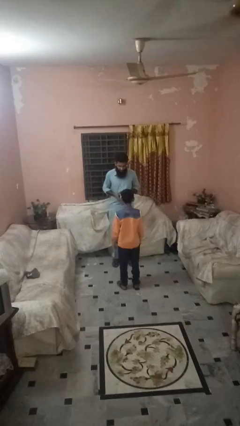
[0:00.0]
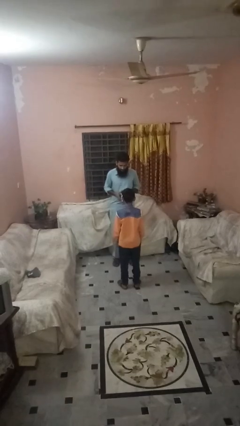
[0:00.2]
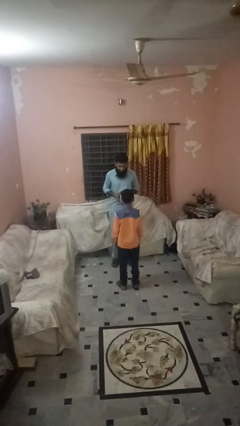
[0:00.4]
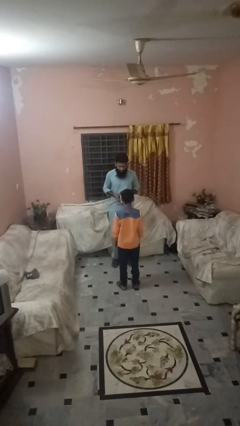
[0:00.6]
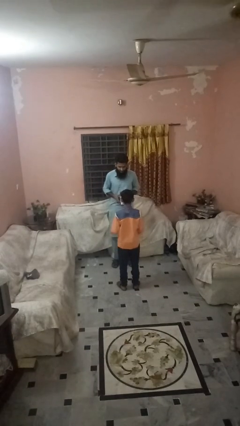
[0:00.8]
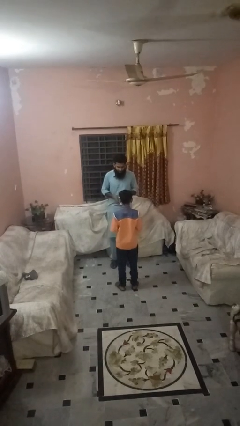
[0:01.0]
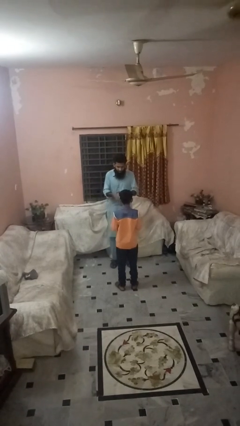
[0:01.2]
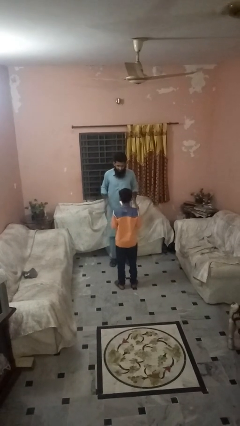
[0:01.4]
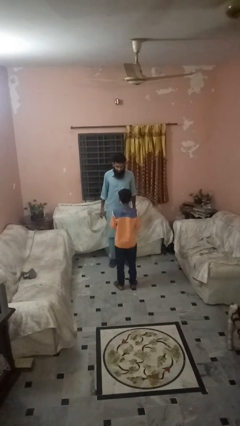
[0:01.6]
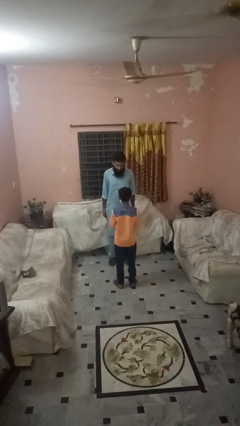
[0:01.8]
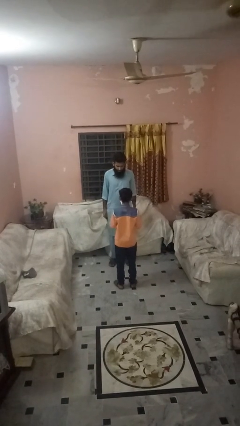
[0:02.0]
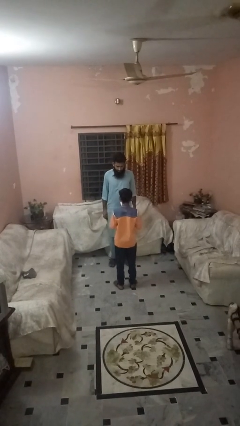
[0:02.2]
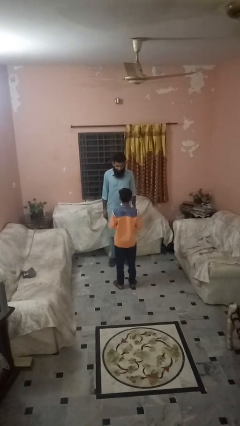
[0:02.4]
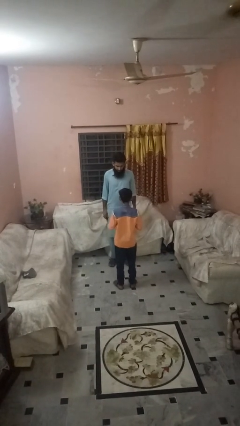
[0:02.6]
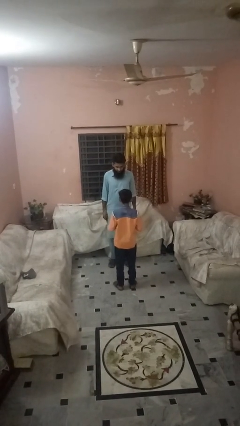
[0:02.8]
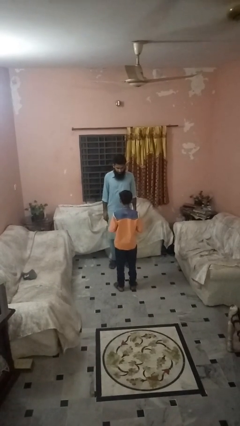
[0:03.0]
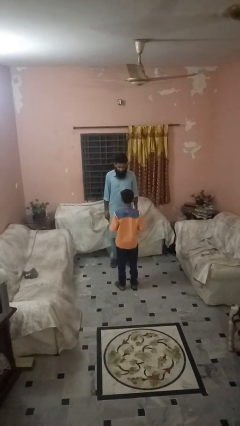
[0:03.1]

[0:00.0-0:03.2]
person throws object to person

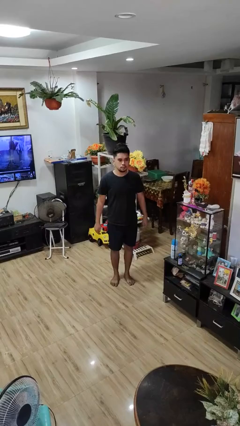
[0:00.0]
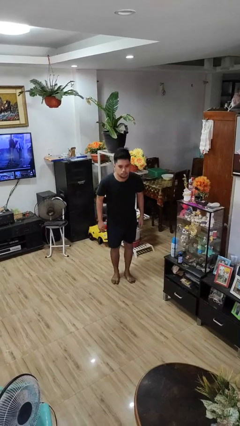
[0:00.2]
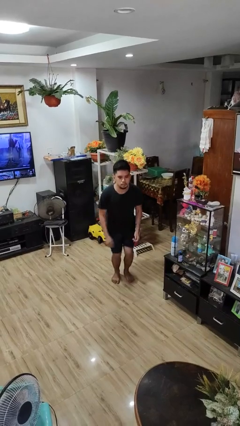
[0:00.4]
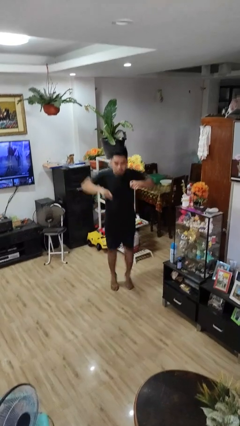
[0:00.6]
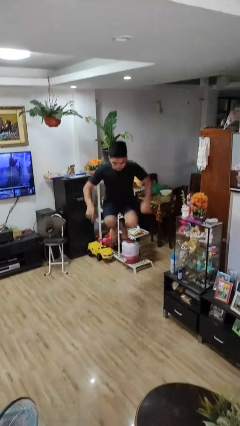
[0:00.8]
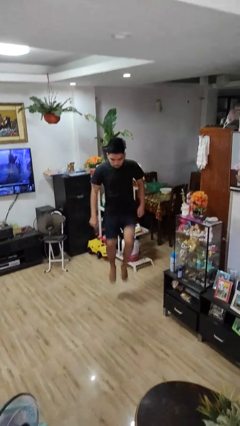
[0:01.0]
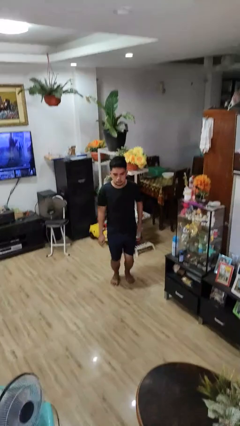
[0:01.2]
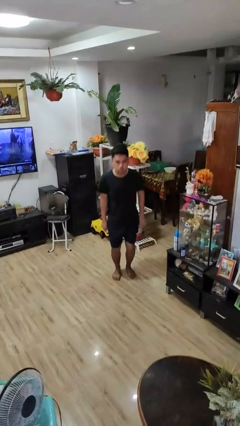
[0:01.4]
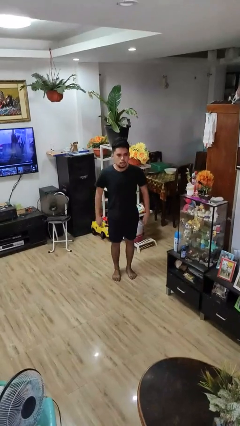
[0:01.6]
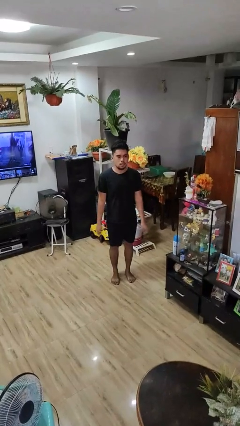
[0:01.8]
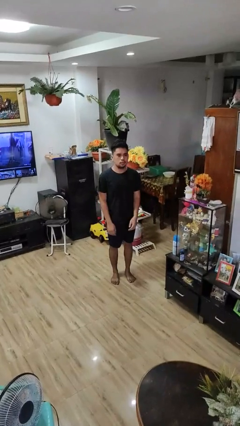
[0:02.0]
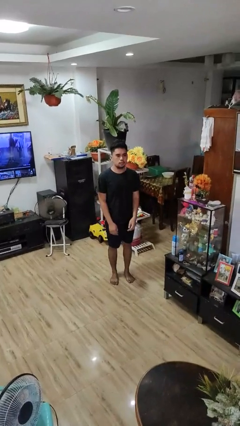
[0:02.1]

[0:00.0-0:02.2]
person jumps

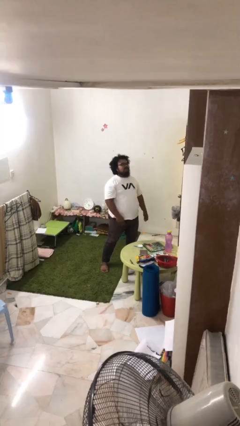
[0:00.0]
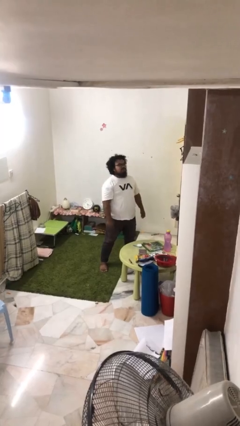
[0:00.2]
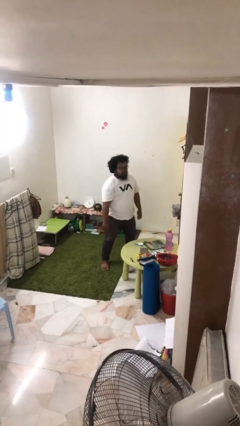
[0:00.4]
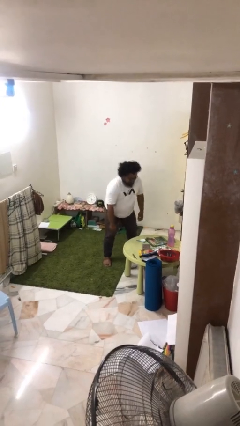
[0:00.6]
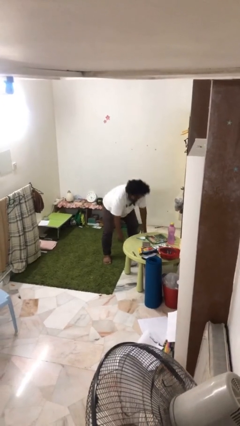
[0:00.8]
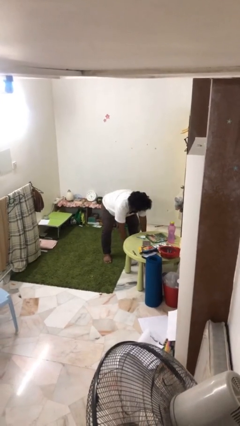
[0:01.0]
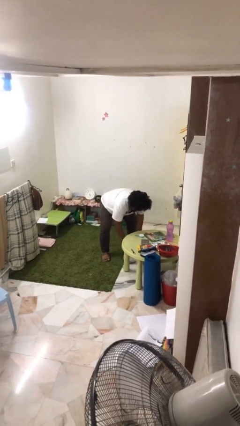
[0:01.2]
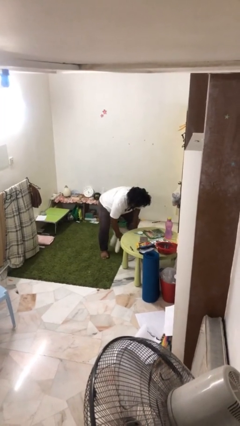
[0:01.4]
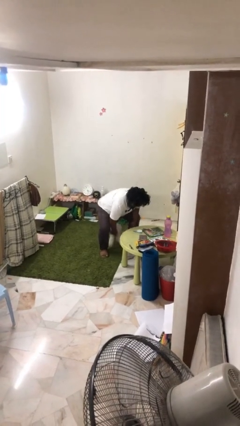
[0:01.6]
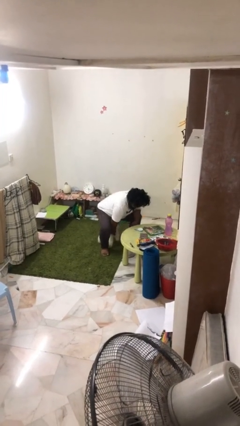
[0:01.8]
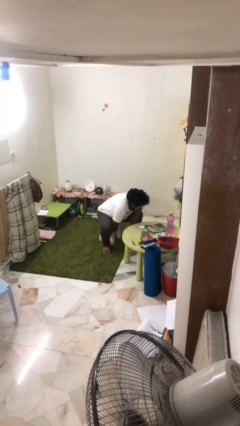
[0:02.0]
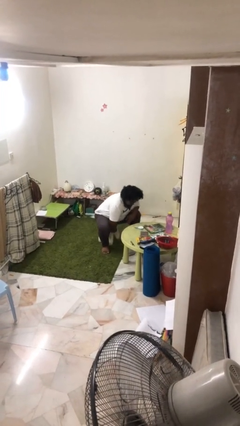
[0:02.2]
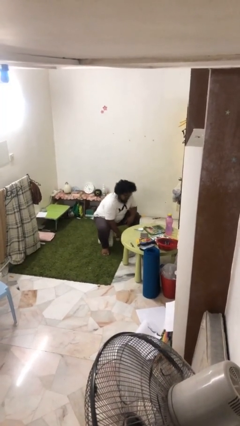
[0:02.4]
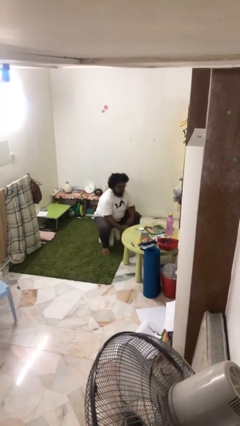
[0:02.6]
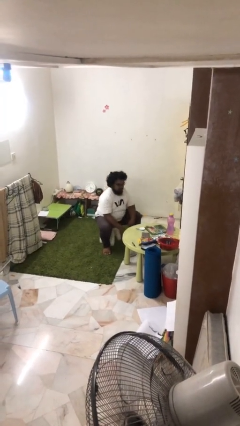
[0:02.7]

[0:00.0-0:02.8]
person sits down

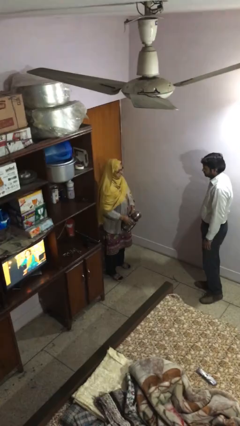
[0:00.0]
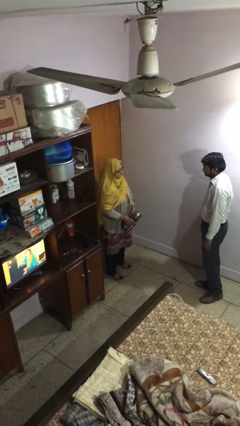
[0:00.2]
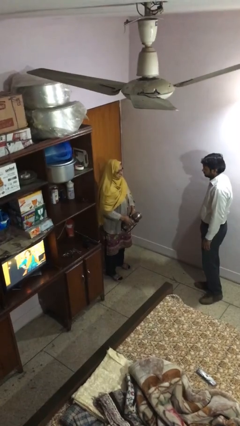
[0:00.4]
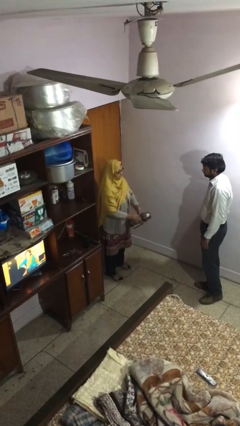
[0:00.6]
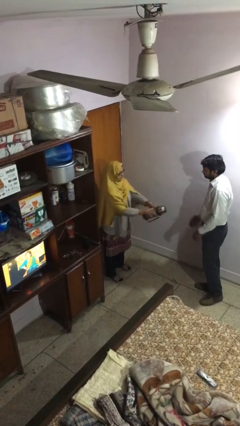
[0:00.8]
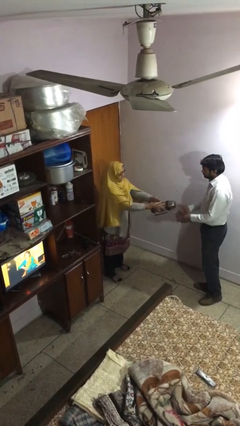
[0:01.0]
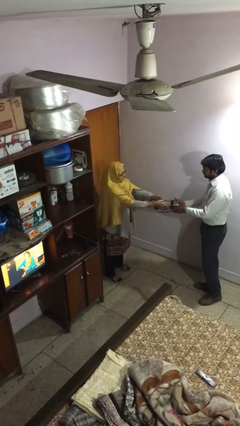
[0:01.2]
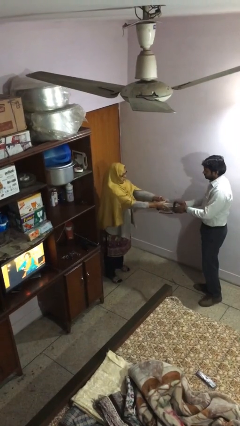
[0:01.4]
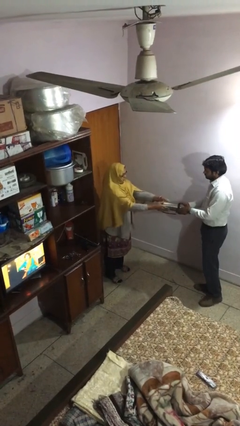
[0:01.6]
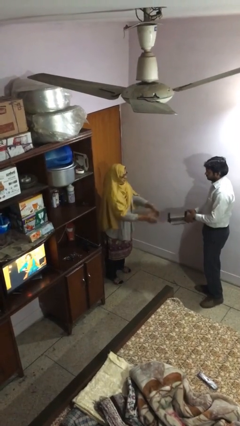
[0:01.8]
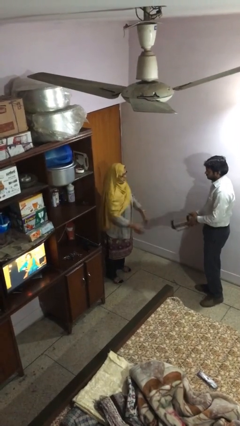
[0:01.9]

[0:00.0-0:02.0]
person transfers object to person

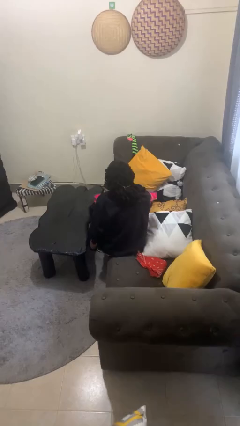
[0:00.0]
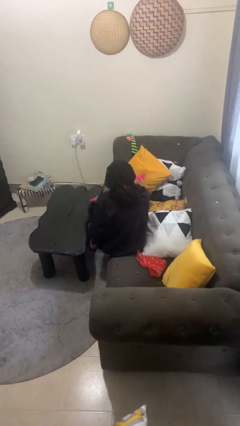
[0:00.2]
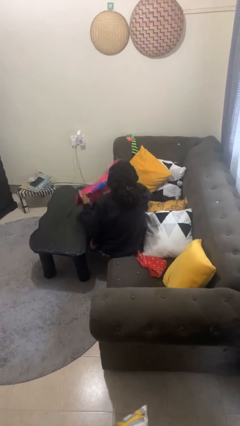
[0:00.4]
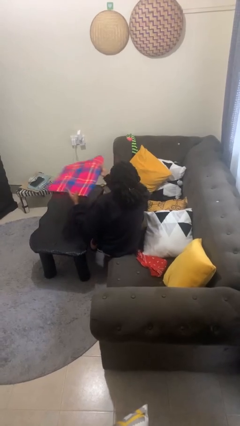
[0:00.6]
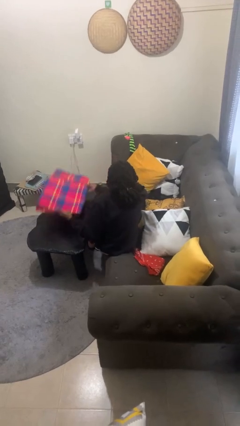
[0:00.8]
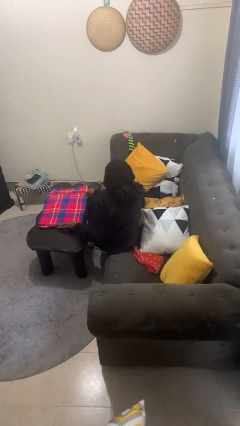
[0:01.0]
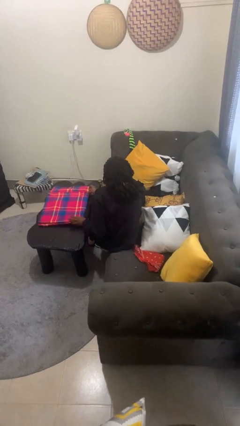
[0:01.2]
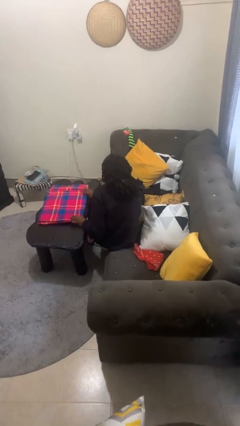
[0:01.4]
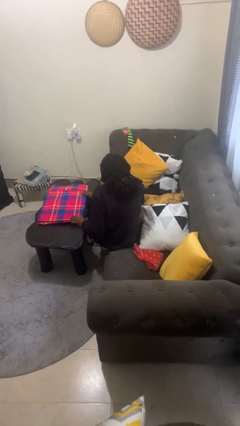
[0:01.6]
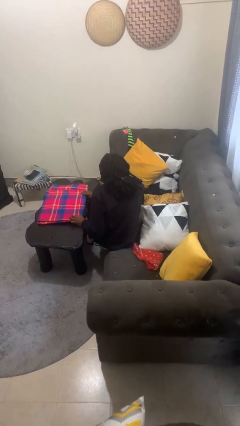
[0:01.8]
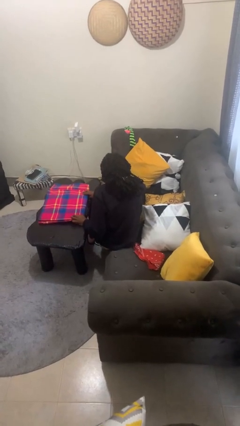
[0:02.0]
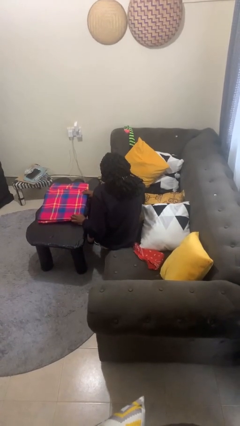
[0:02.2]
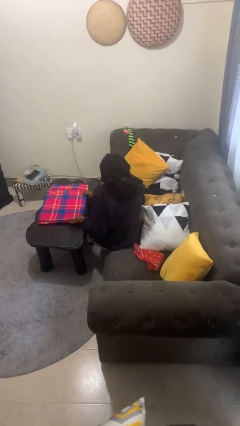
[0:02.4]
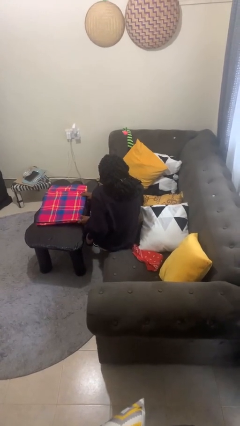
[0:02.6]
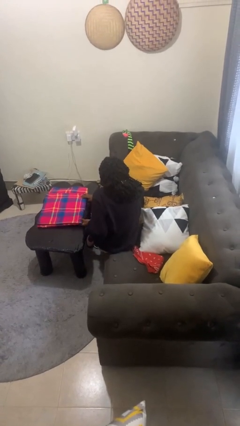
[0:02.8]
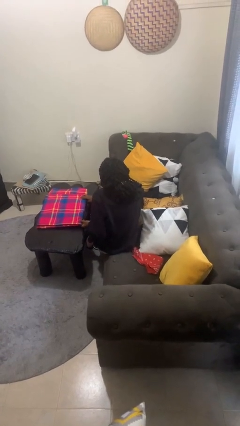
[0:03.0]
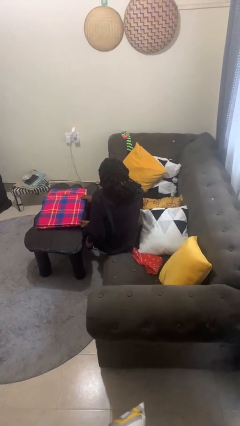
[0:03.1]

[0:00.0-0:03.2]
person spreads tablecloth

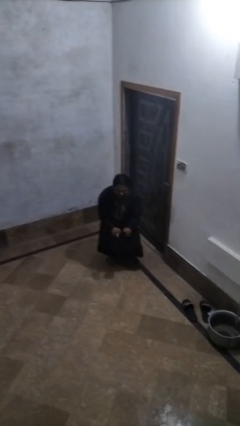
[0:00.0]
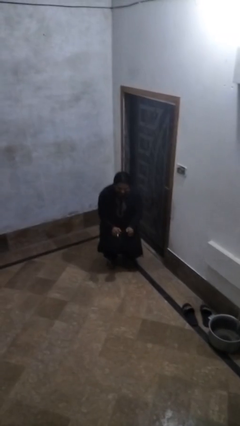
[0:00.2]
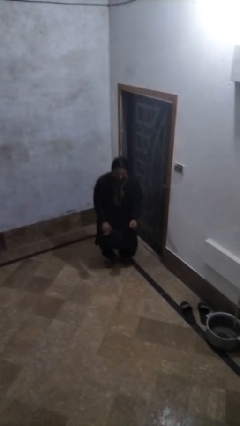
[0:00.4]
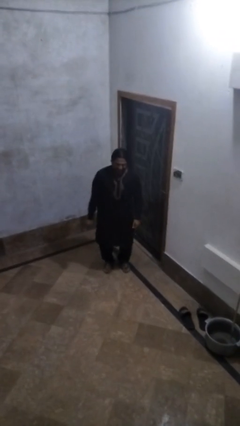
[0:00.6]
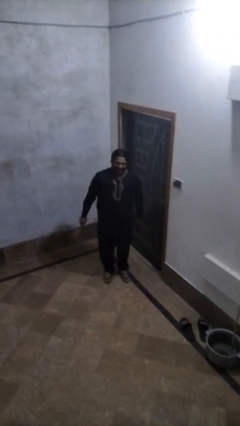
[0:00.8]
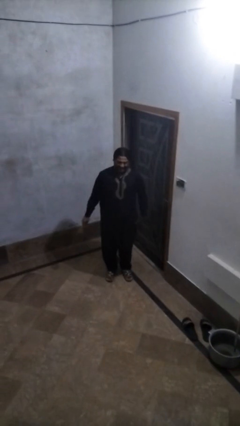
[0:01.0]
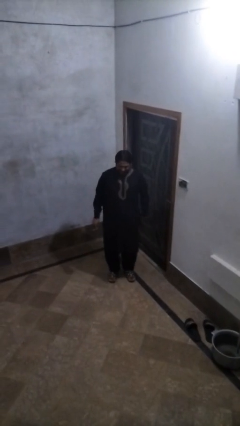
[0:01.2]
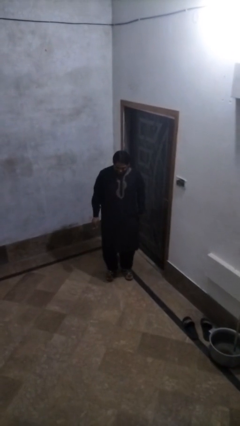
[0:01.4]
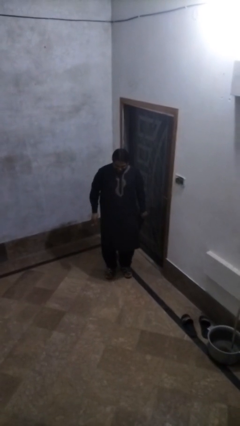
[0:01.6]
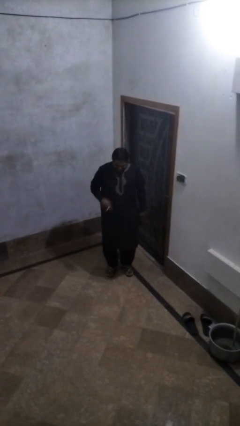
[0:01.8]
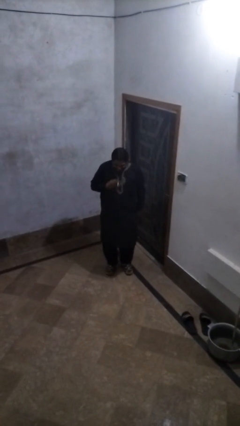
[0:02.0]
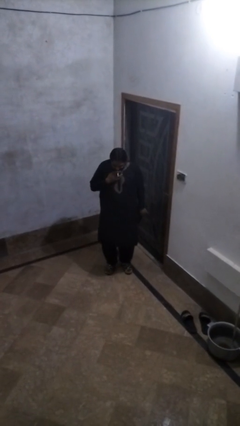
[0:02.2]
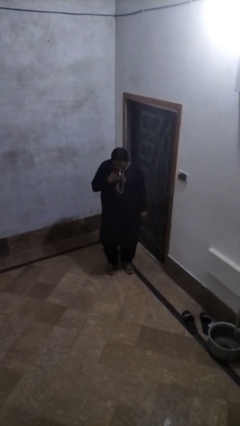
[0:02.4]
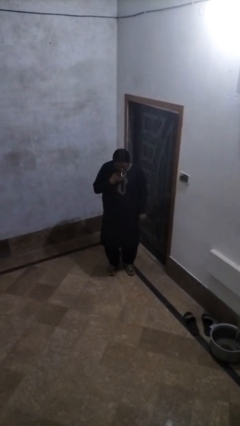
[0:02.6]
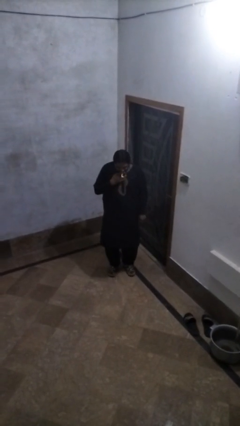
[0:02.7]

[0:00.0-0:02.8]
person stands up

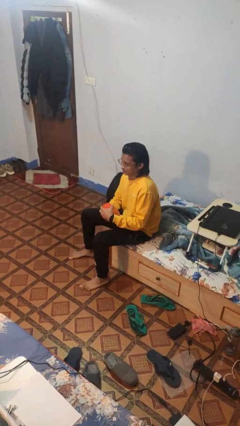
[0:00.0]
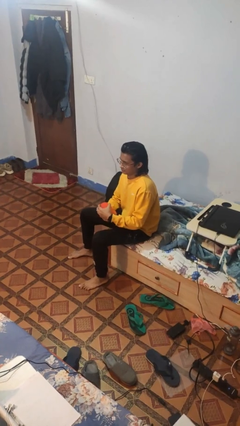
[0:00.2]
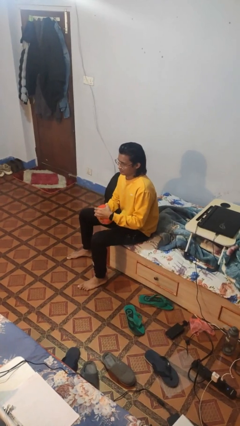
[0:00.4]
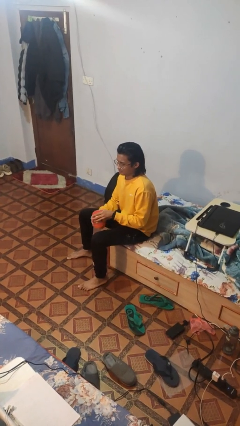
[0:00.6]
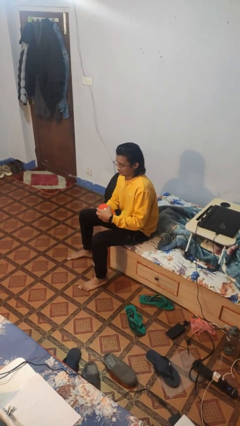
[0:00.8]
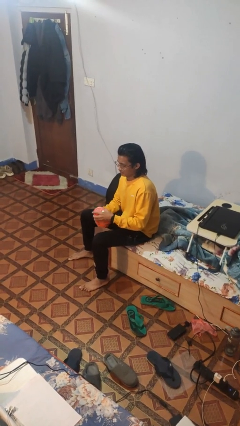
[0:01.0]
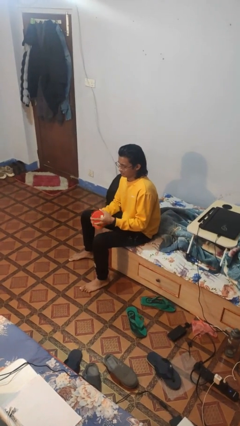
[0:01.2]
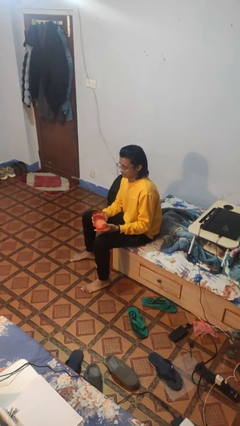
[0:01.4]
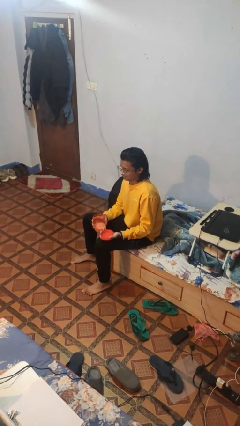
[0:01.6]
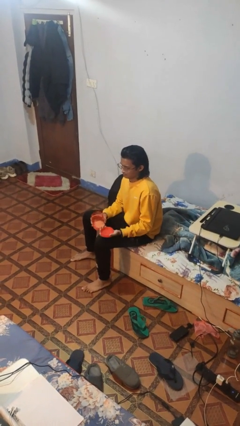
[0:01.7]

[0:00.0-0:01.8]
person opens jar
